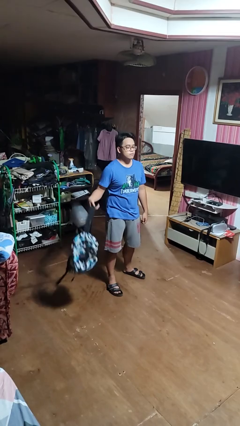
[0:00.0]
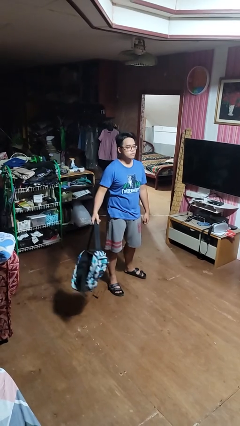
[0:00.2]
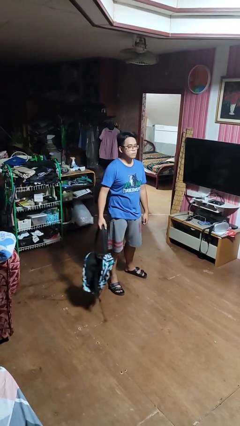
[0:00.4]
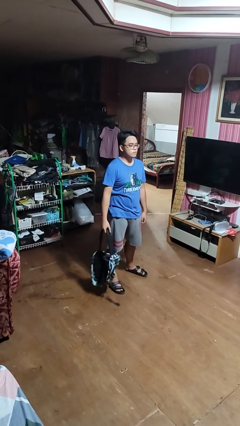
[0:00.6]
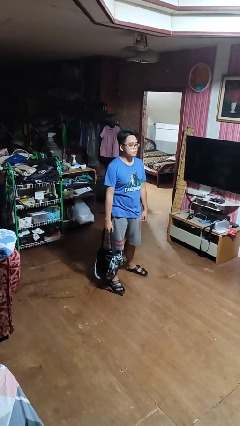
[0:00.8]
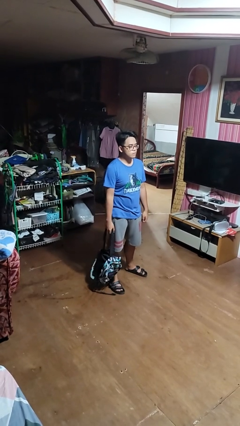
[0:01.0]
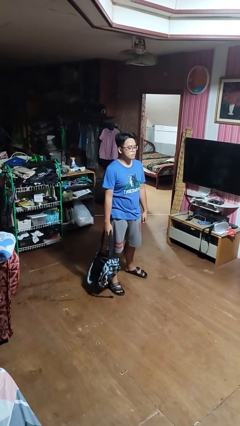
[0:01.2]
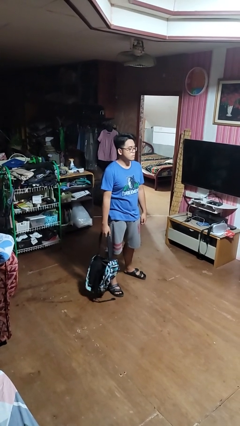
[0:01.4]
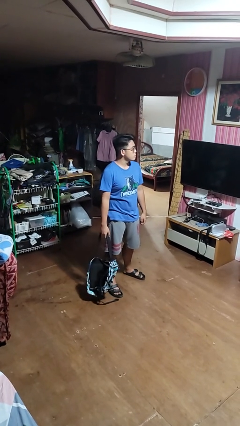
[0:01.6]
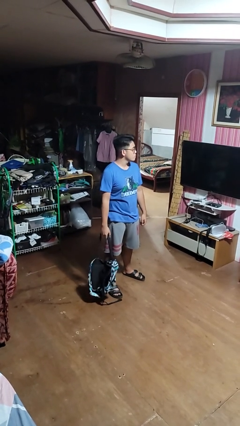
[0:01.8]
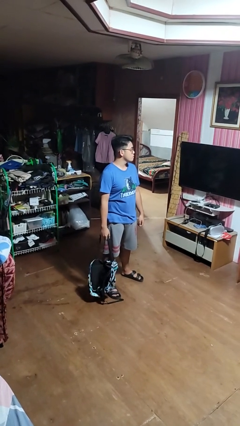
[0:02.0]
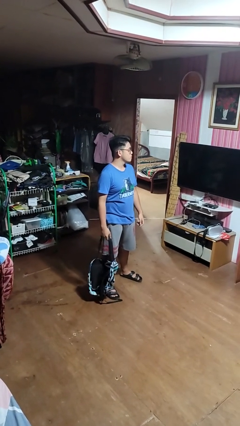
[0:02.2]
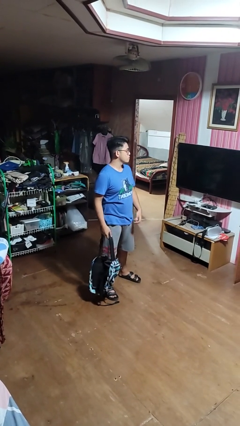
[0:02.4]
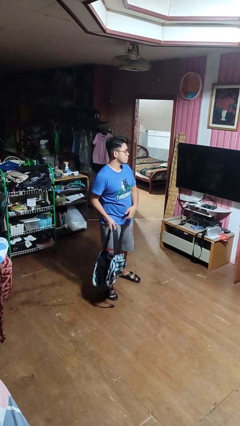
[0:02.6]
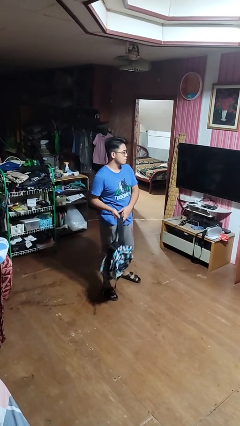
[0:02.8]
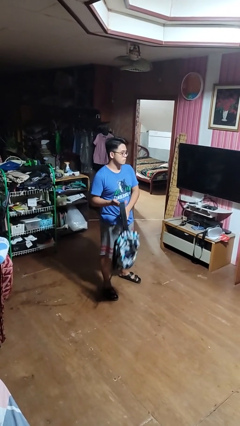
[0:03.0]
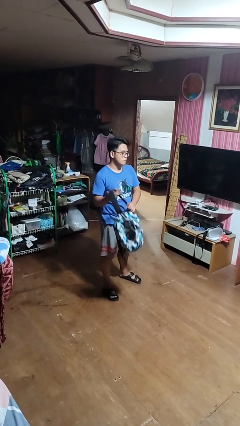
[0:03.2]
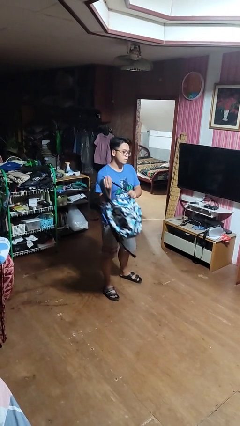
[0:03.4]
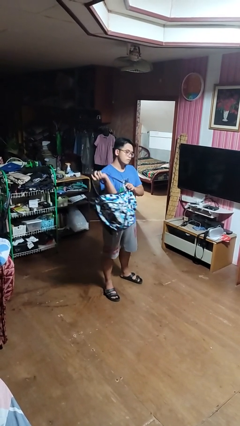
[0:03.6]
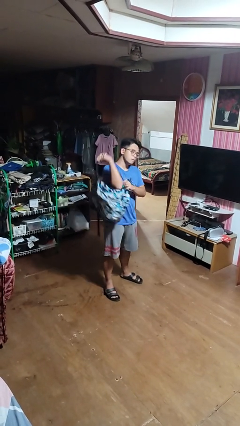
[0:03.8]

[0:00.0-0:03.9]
person takes off backpack

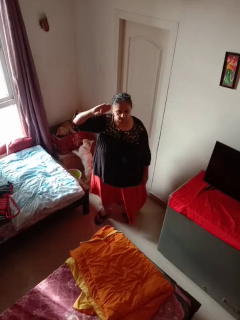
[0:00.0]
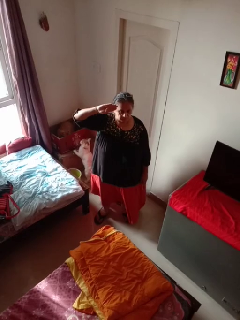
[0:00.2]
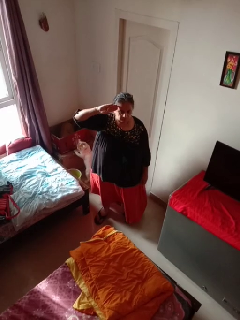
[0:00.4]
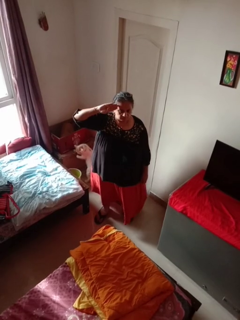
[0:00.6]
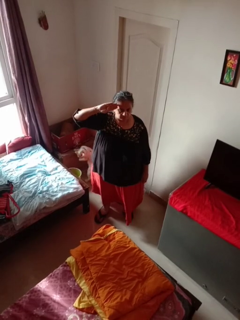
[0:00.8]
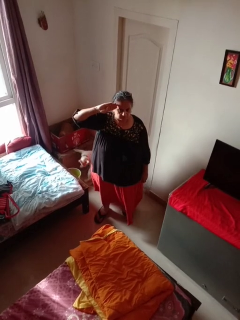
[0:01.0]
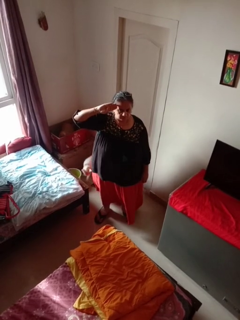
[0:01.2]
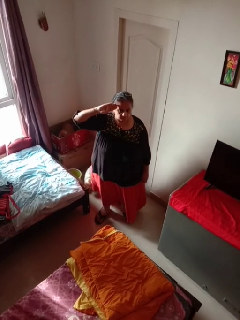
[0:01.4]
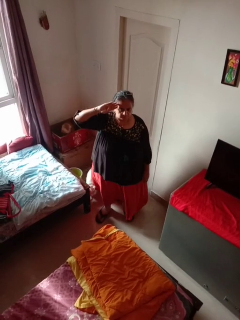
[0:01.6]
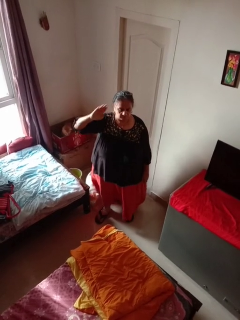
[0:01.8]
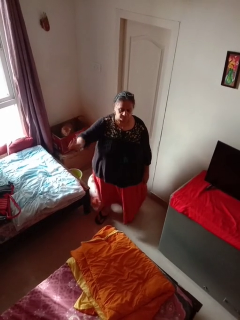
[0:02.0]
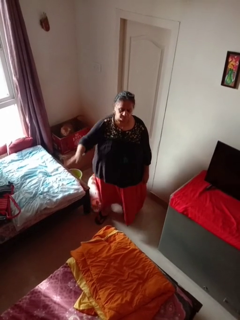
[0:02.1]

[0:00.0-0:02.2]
person salutes

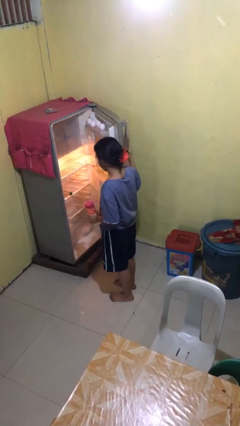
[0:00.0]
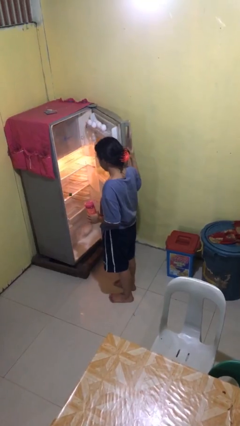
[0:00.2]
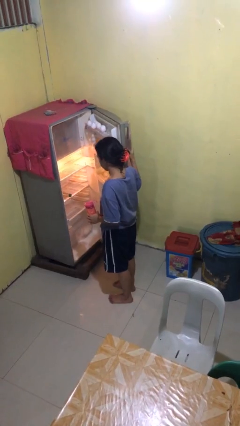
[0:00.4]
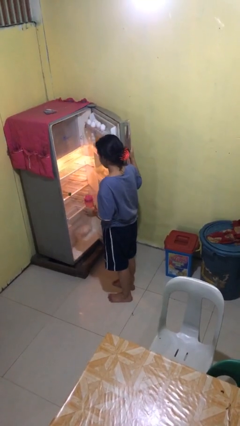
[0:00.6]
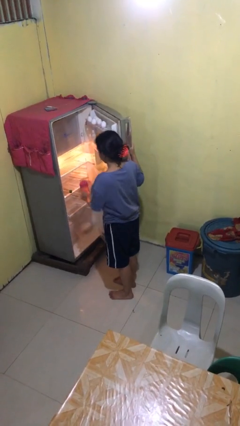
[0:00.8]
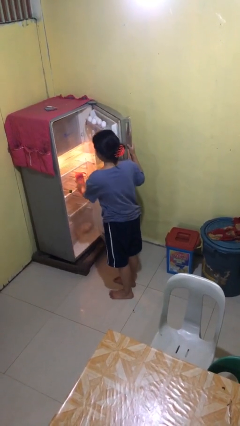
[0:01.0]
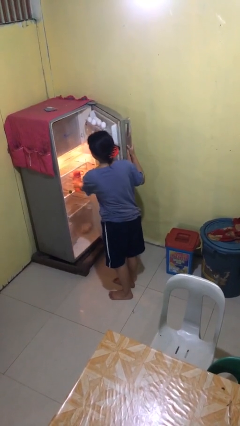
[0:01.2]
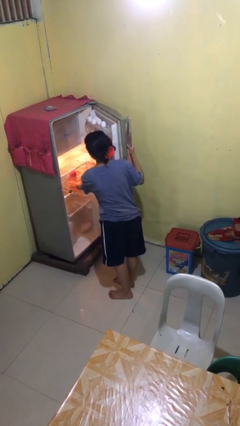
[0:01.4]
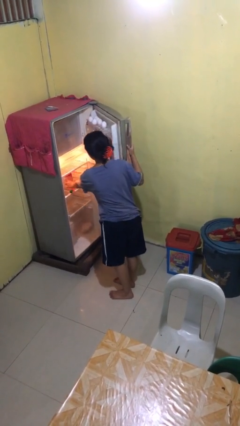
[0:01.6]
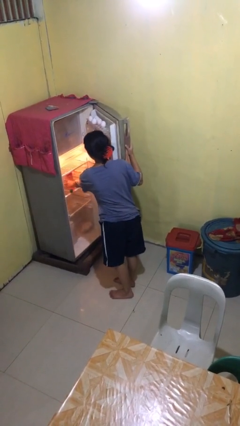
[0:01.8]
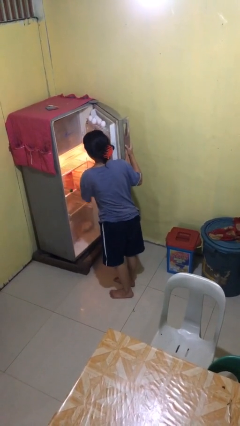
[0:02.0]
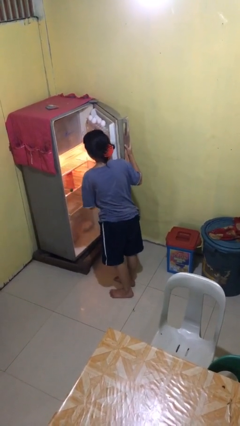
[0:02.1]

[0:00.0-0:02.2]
person puts object into refrigerator

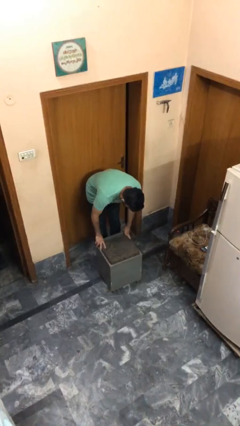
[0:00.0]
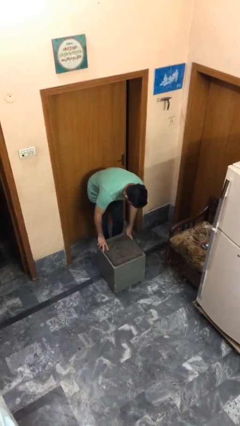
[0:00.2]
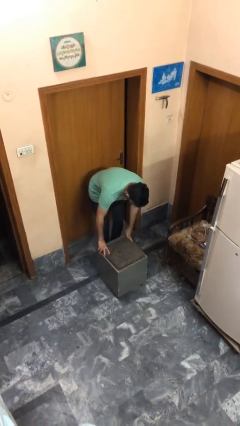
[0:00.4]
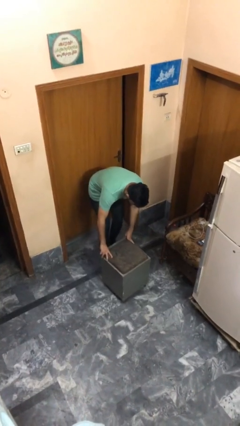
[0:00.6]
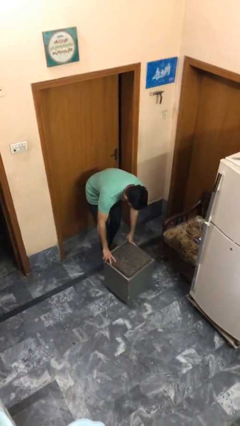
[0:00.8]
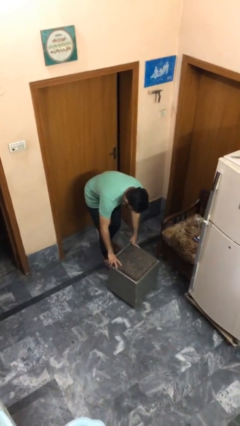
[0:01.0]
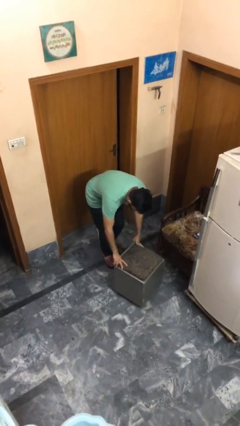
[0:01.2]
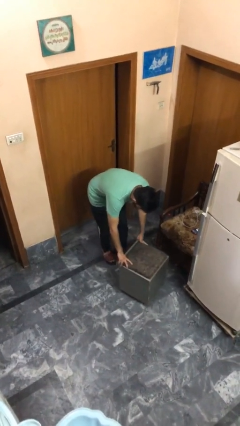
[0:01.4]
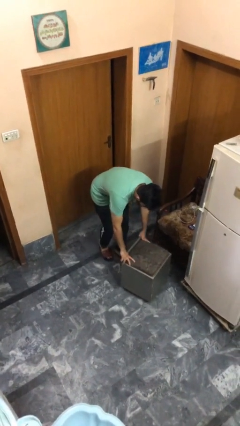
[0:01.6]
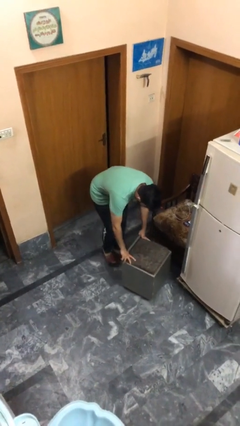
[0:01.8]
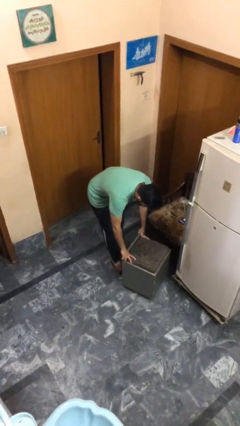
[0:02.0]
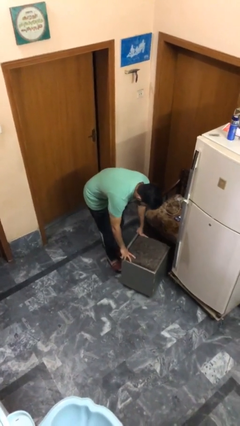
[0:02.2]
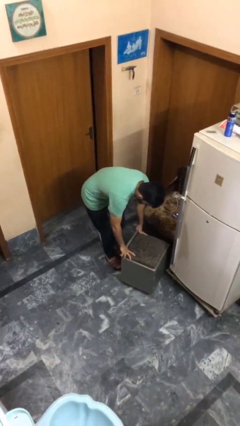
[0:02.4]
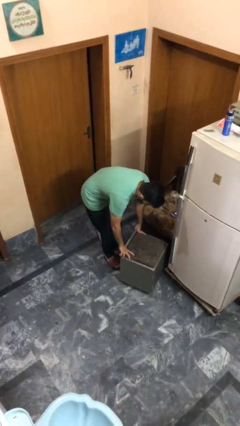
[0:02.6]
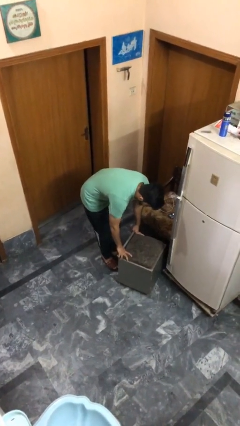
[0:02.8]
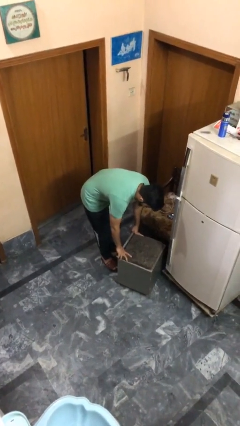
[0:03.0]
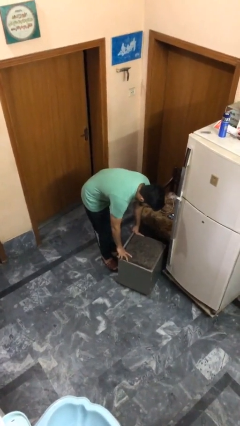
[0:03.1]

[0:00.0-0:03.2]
person pushes wheeled cart

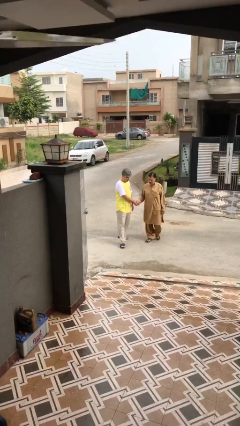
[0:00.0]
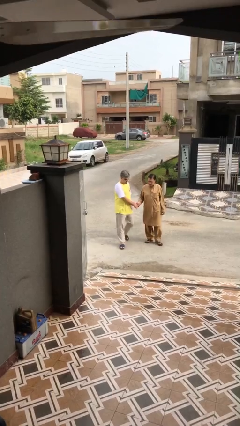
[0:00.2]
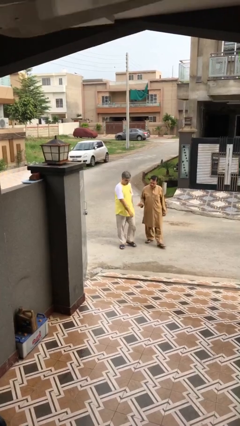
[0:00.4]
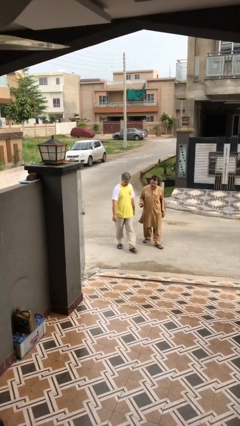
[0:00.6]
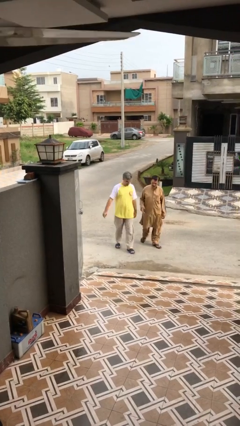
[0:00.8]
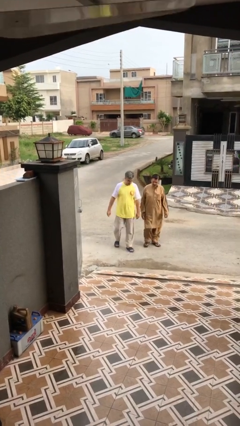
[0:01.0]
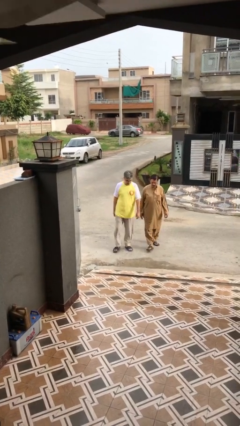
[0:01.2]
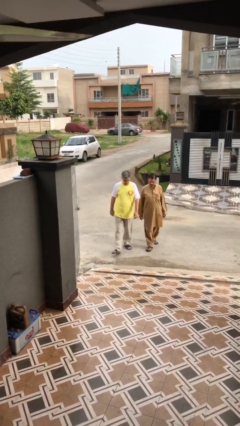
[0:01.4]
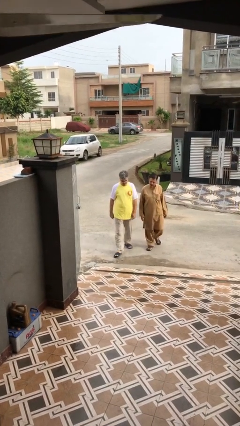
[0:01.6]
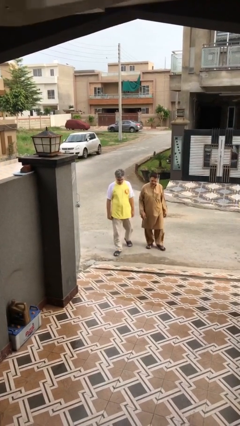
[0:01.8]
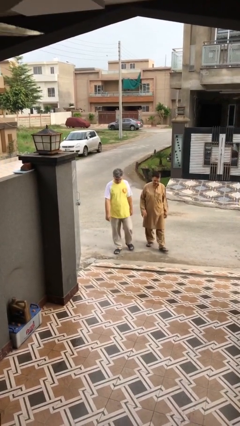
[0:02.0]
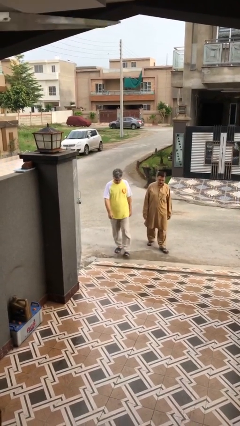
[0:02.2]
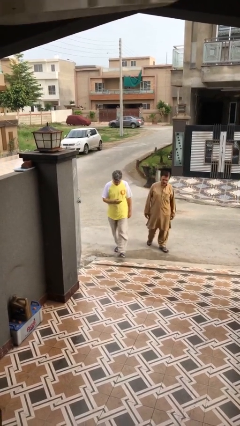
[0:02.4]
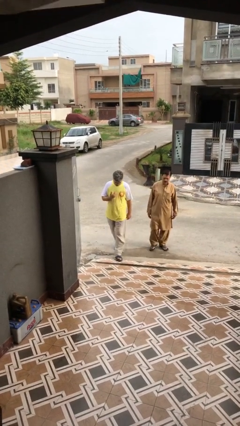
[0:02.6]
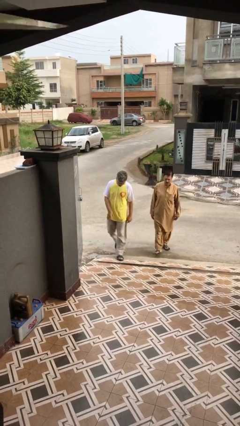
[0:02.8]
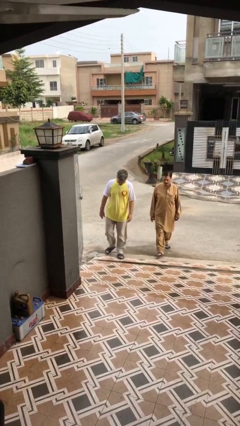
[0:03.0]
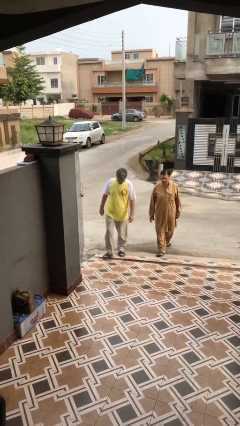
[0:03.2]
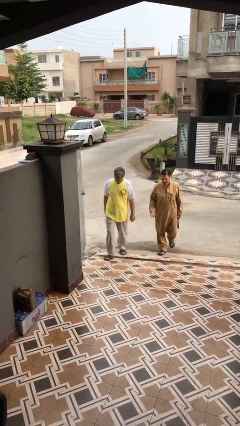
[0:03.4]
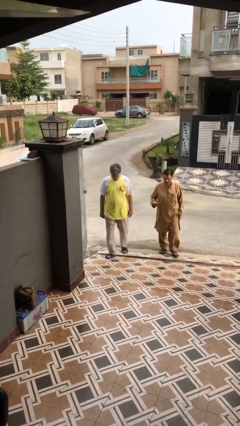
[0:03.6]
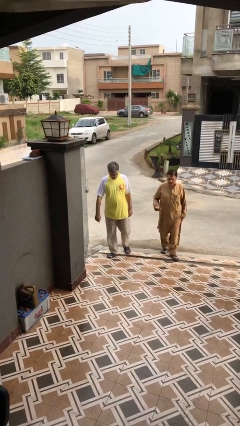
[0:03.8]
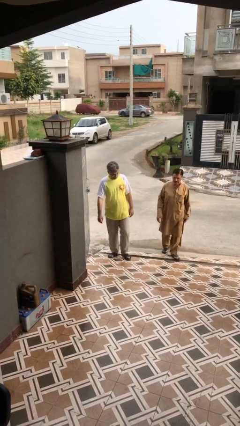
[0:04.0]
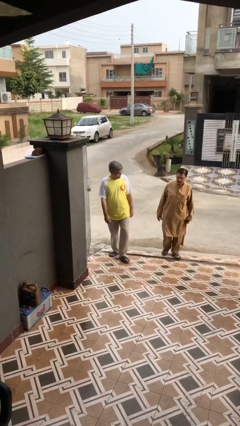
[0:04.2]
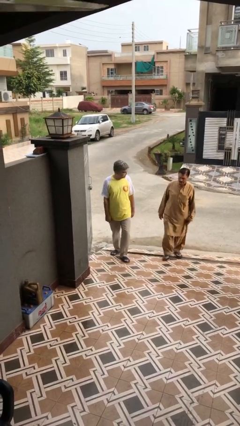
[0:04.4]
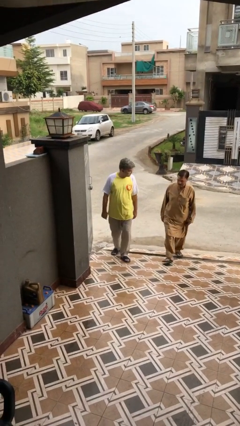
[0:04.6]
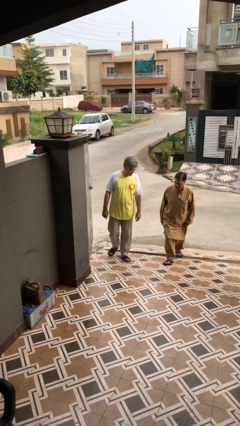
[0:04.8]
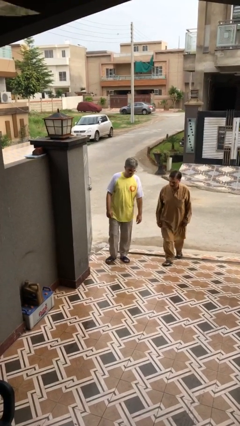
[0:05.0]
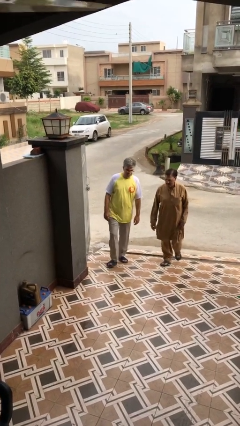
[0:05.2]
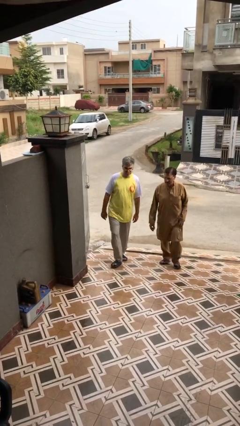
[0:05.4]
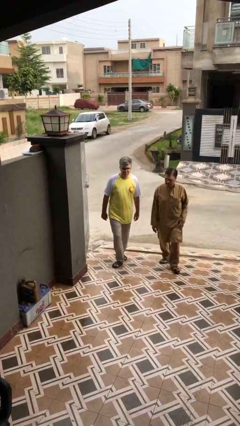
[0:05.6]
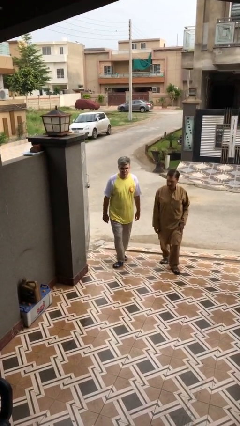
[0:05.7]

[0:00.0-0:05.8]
person talks to person

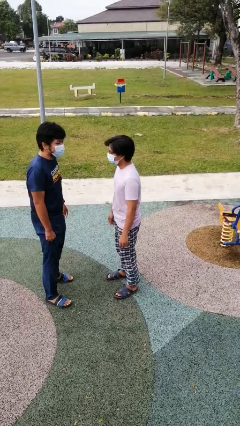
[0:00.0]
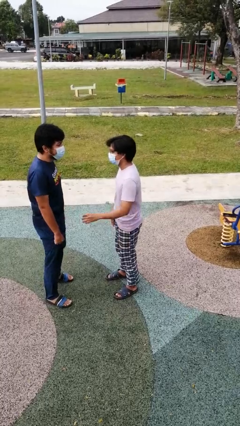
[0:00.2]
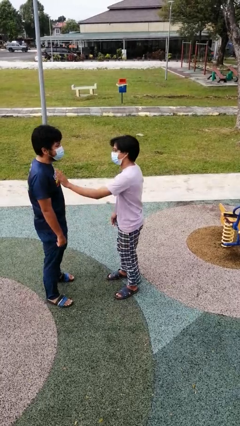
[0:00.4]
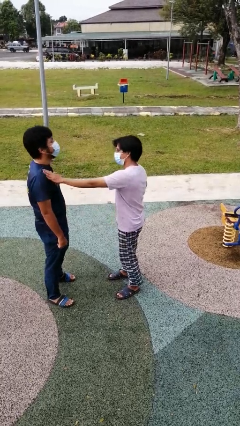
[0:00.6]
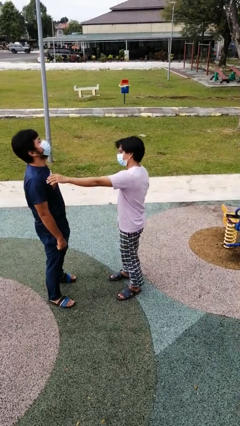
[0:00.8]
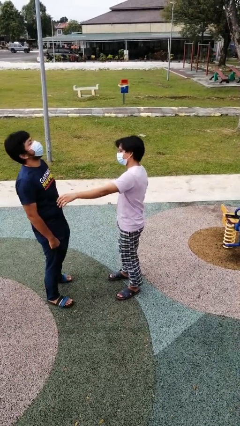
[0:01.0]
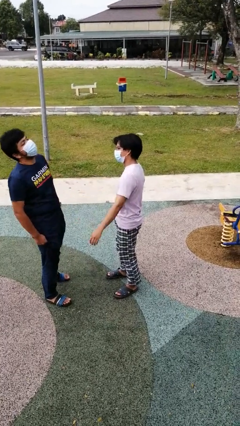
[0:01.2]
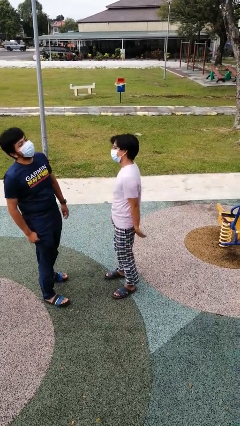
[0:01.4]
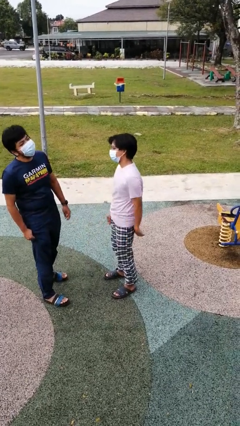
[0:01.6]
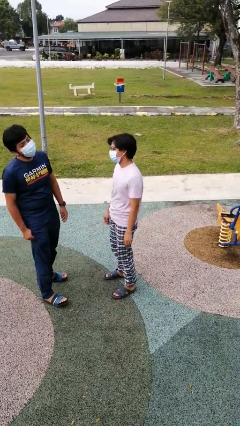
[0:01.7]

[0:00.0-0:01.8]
person shoves person
